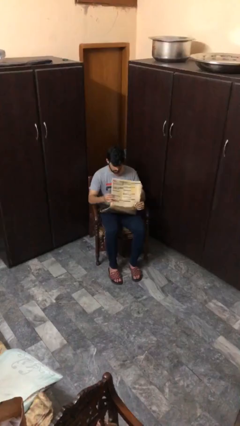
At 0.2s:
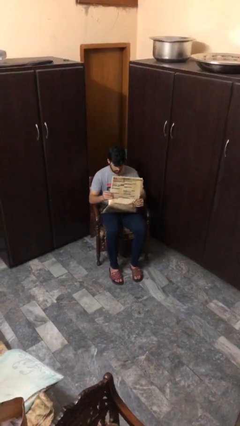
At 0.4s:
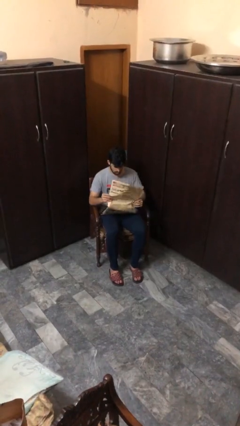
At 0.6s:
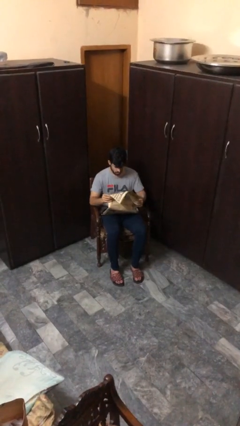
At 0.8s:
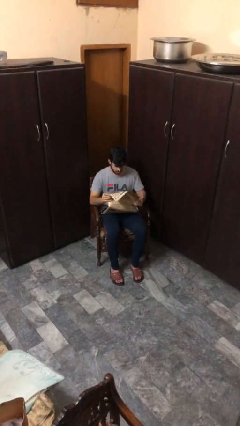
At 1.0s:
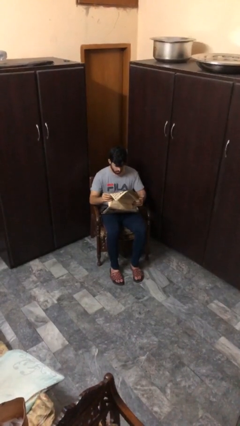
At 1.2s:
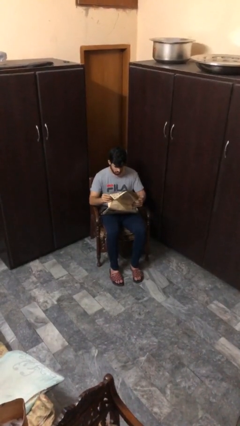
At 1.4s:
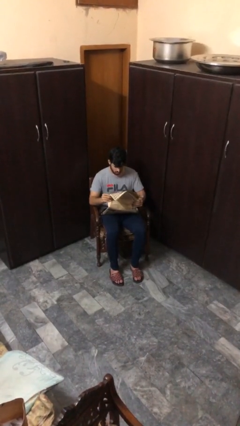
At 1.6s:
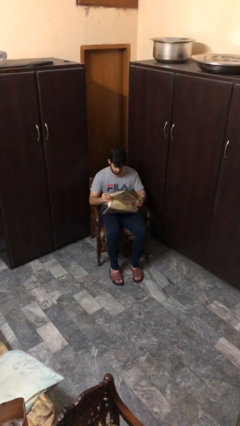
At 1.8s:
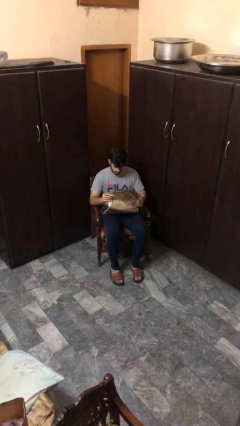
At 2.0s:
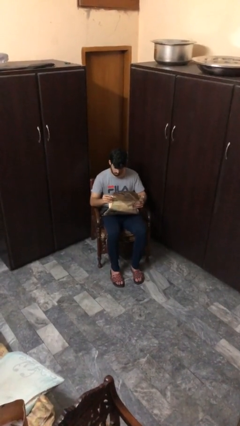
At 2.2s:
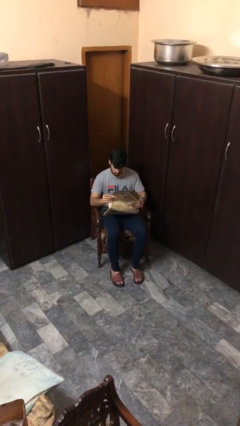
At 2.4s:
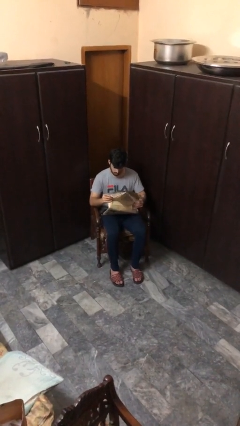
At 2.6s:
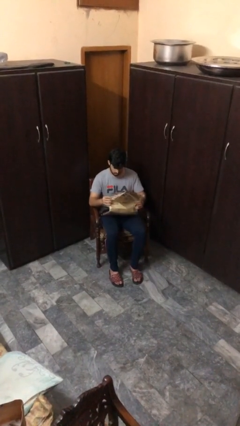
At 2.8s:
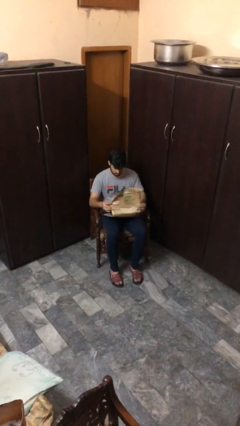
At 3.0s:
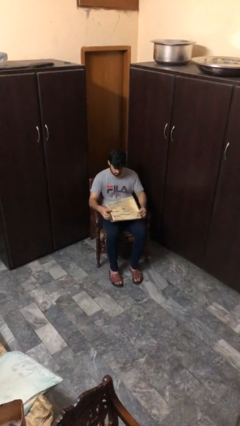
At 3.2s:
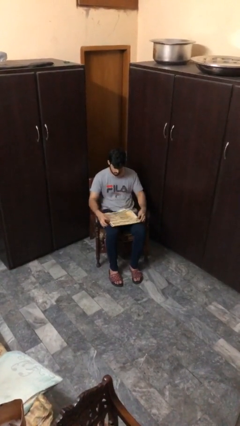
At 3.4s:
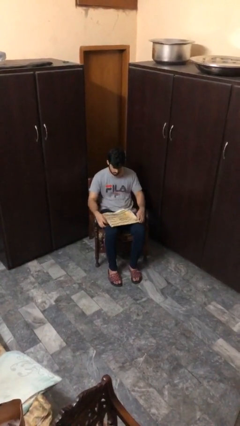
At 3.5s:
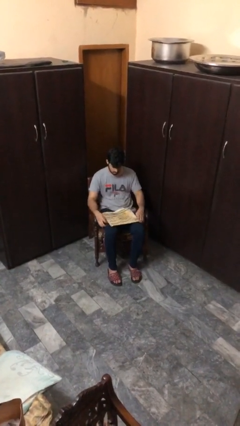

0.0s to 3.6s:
person reads newspaper

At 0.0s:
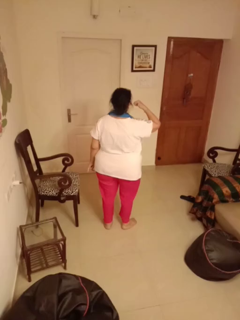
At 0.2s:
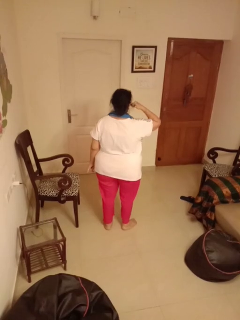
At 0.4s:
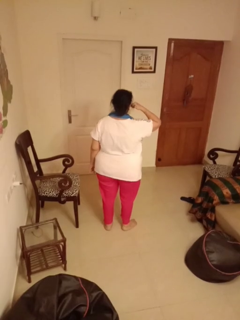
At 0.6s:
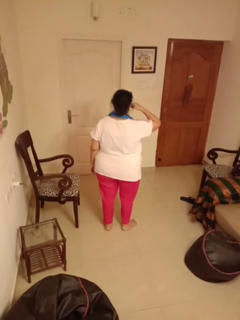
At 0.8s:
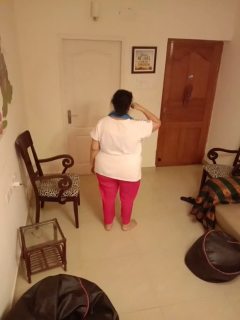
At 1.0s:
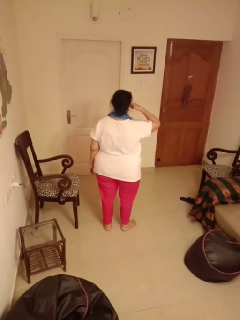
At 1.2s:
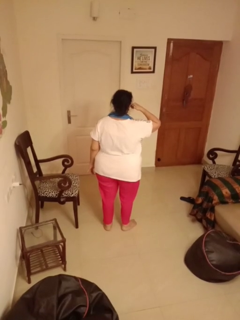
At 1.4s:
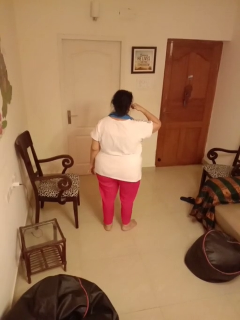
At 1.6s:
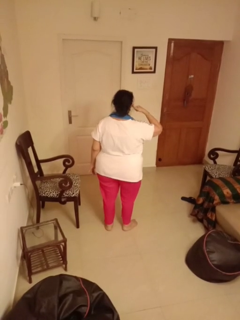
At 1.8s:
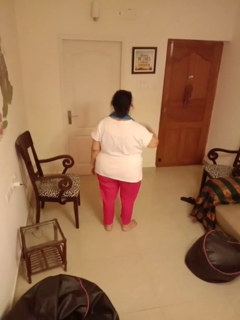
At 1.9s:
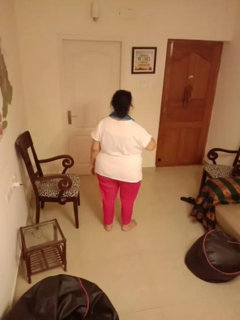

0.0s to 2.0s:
person gestures call me

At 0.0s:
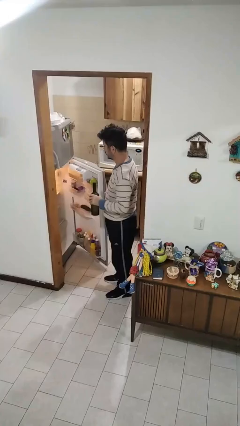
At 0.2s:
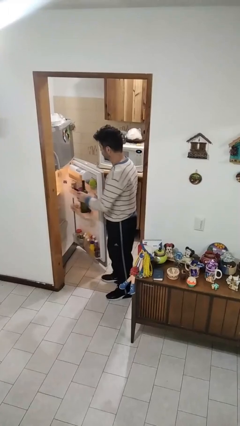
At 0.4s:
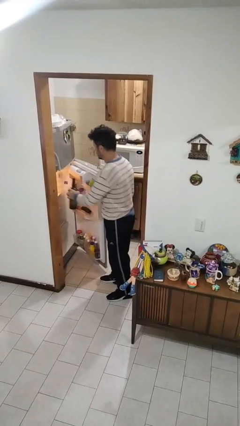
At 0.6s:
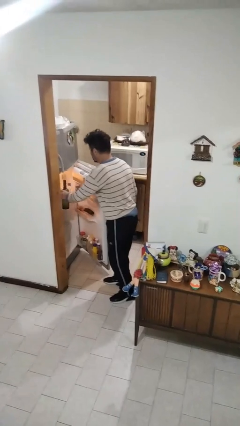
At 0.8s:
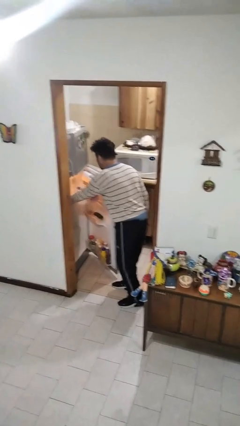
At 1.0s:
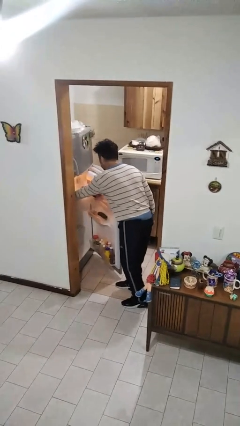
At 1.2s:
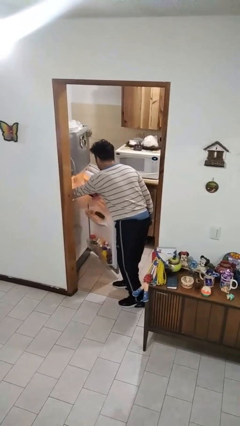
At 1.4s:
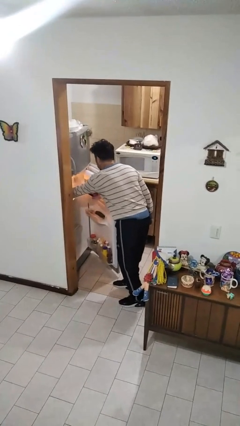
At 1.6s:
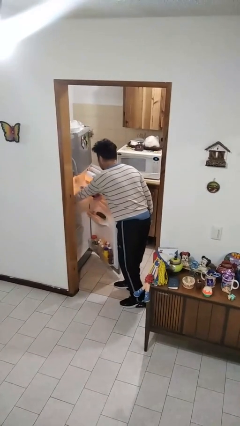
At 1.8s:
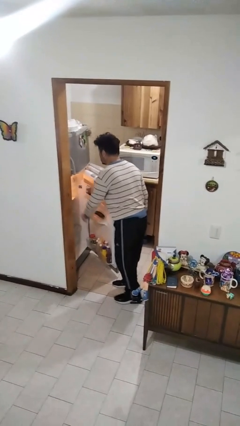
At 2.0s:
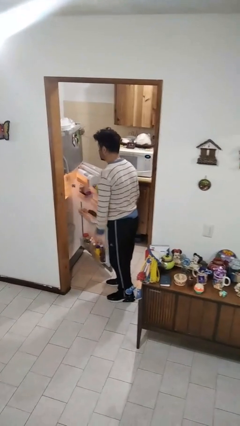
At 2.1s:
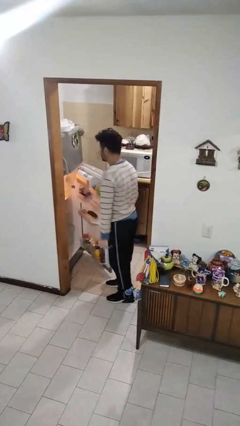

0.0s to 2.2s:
person puts object into refrigerator

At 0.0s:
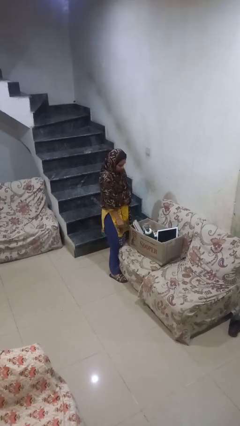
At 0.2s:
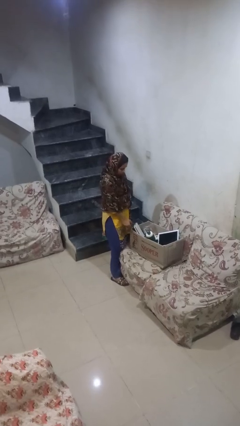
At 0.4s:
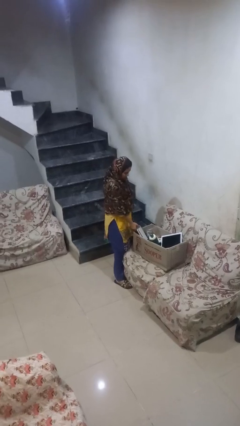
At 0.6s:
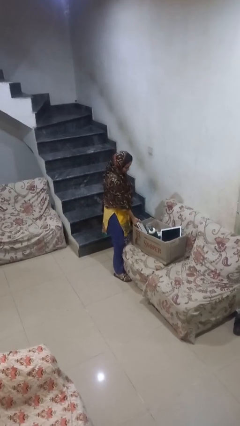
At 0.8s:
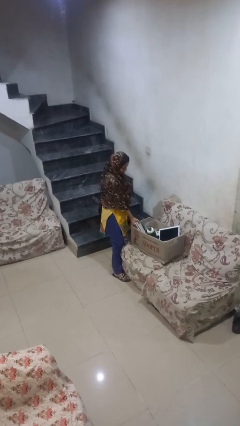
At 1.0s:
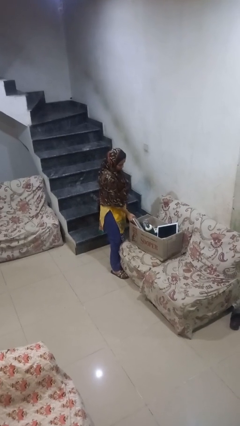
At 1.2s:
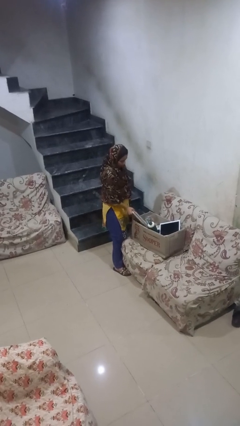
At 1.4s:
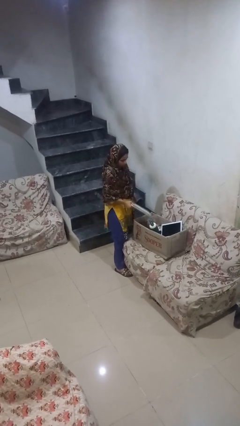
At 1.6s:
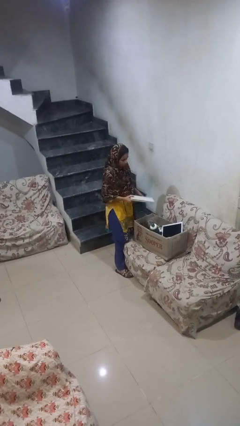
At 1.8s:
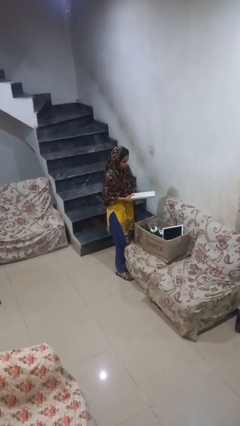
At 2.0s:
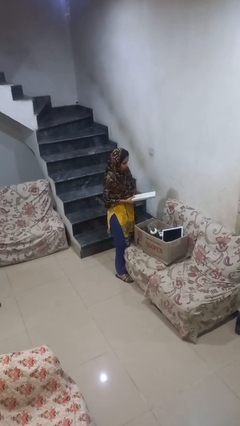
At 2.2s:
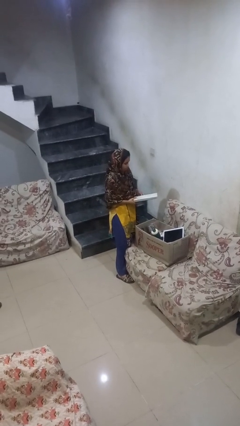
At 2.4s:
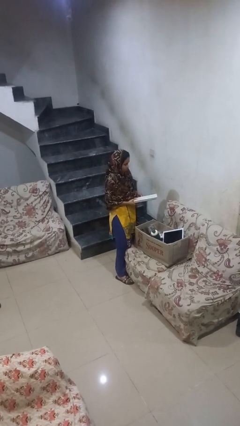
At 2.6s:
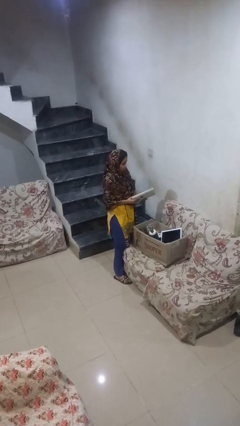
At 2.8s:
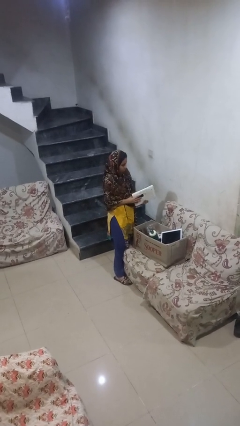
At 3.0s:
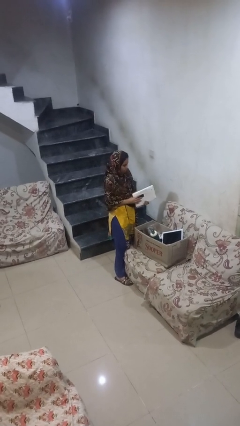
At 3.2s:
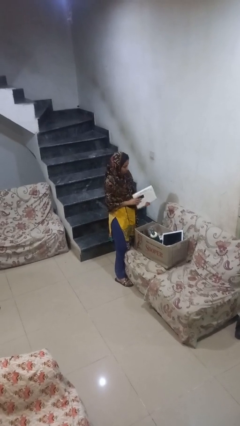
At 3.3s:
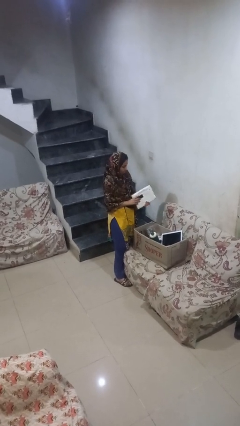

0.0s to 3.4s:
person takes object from box

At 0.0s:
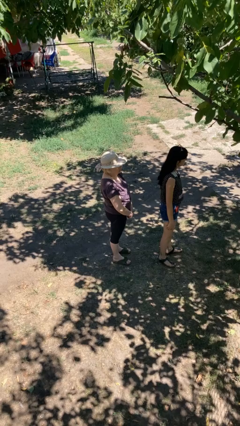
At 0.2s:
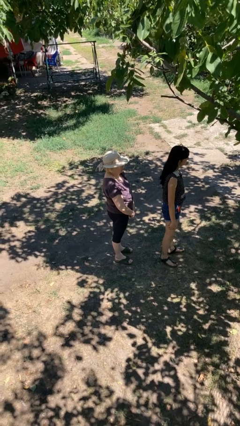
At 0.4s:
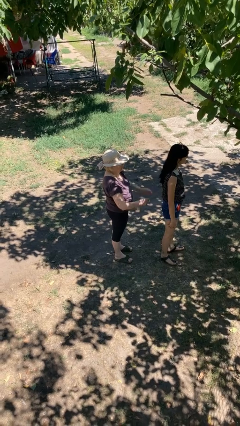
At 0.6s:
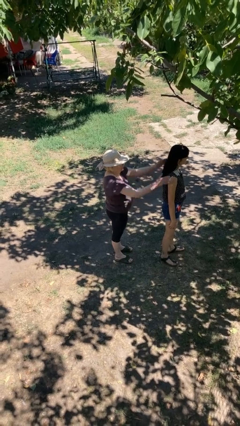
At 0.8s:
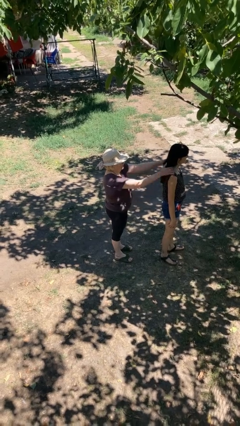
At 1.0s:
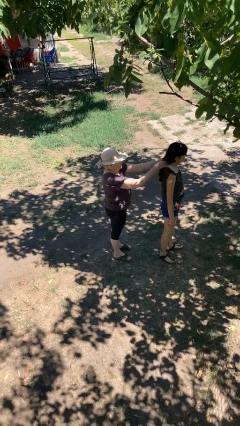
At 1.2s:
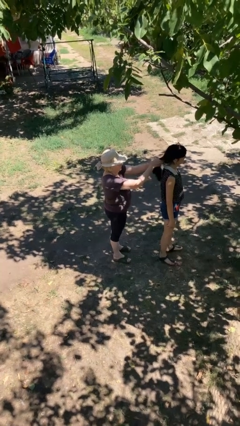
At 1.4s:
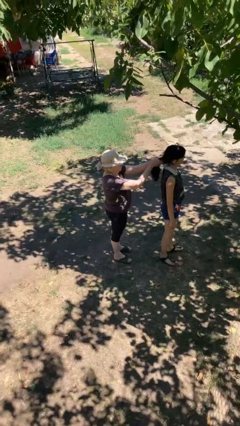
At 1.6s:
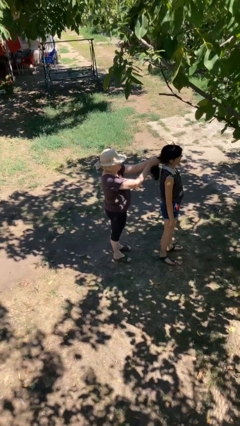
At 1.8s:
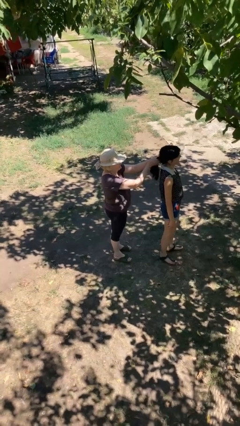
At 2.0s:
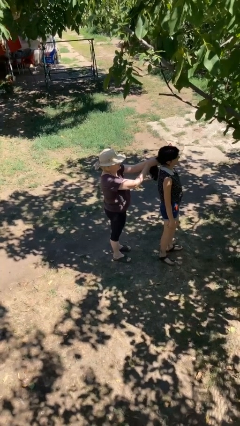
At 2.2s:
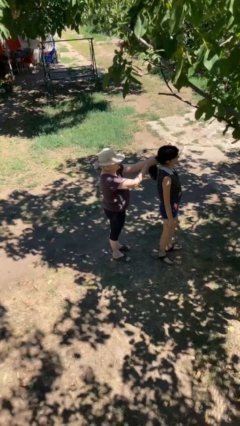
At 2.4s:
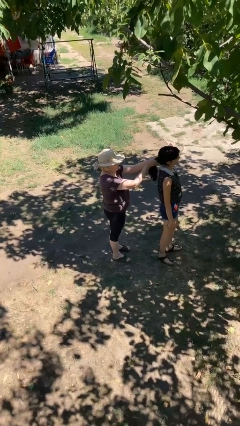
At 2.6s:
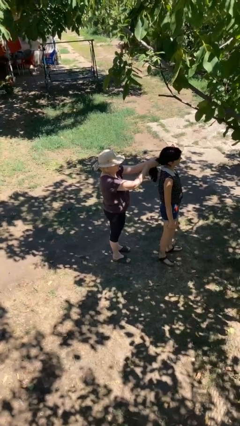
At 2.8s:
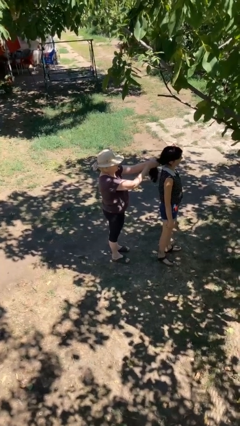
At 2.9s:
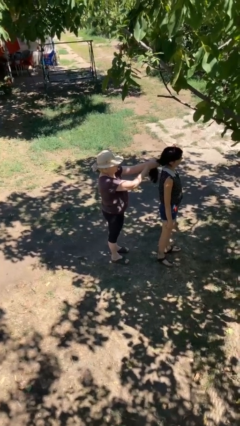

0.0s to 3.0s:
person grabs person by hair

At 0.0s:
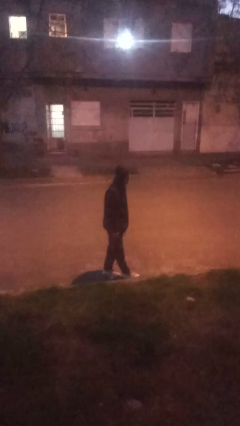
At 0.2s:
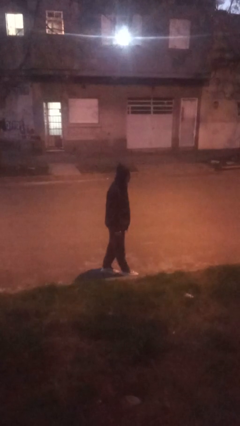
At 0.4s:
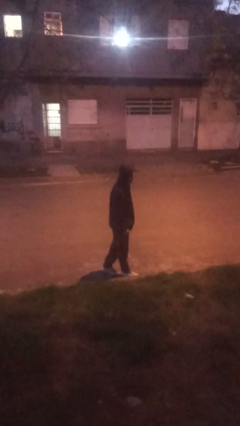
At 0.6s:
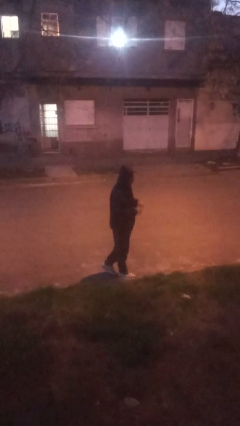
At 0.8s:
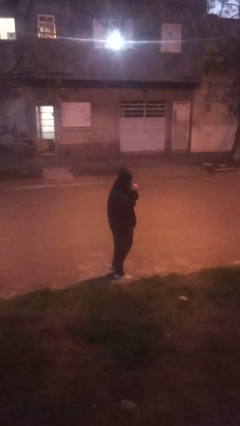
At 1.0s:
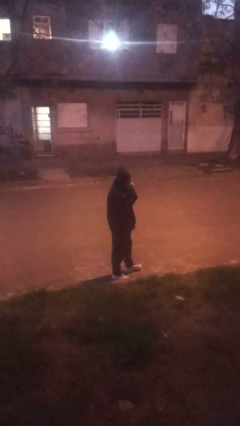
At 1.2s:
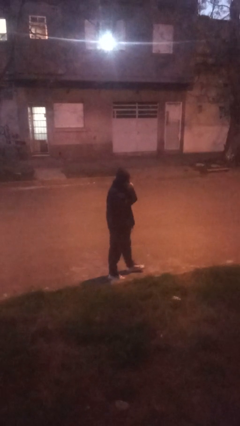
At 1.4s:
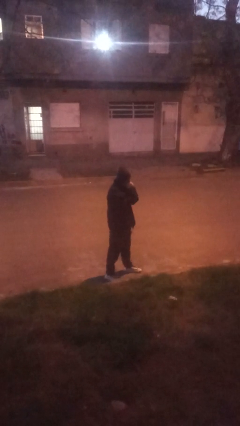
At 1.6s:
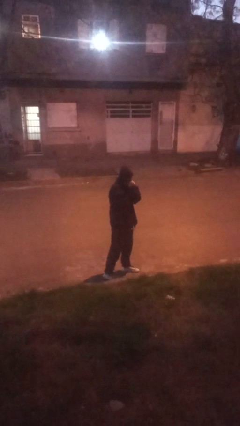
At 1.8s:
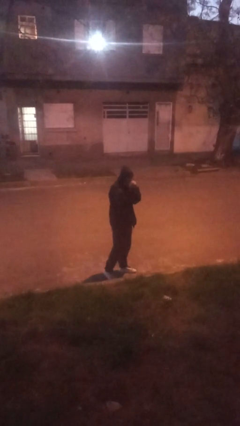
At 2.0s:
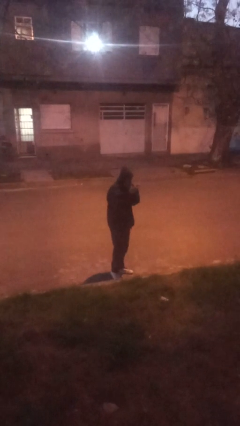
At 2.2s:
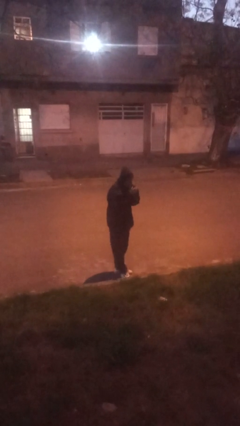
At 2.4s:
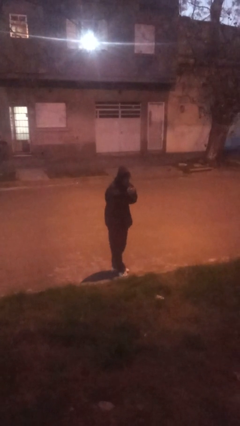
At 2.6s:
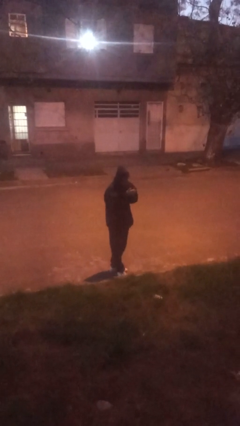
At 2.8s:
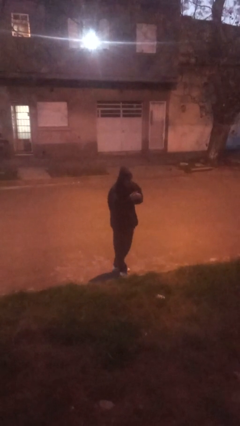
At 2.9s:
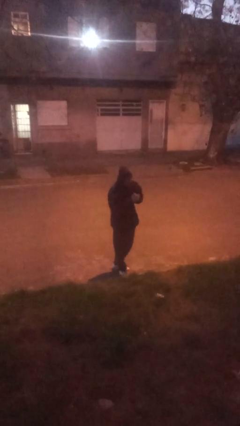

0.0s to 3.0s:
person blows into hands

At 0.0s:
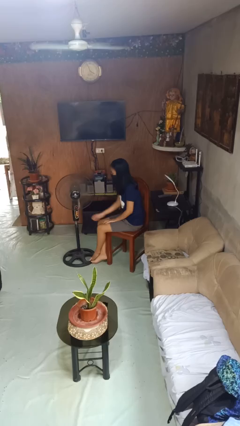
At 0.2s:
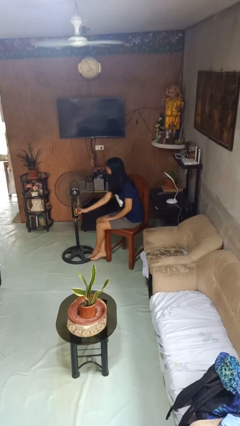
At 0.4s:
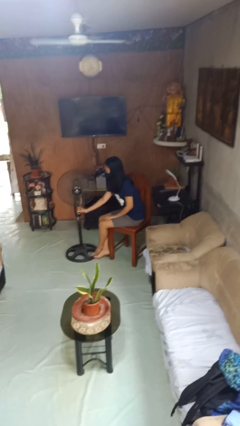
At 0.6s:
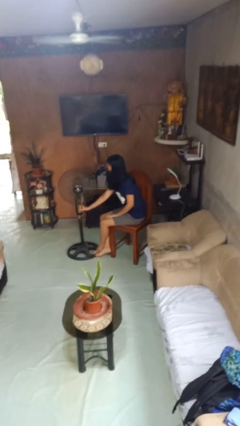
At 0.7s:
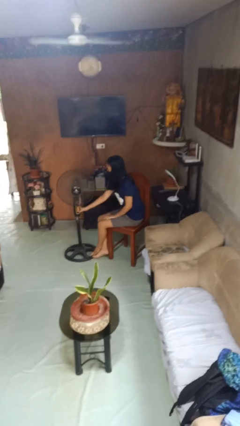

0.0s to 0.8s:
person turns off fan
